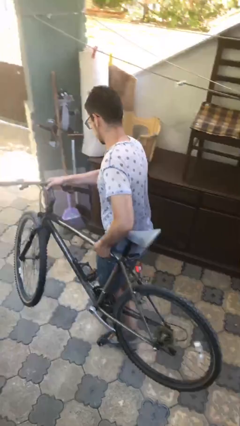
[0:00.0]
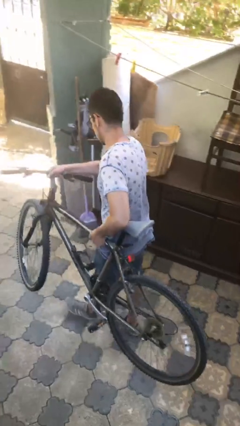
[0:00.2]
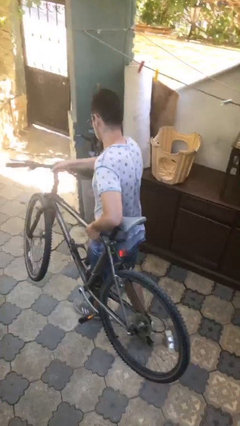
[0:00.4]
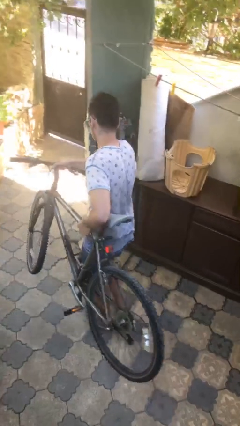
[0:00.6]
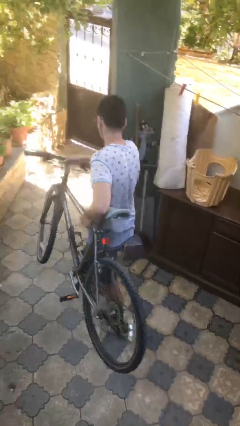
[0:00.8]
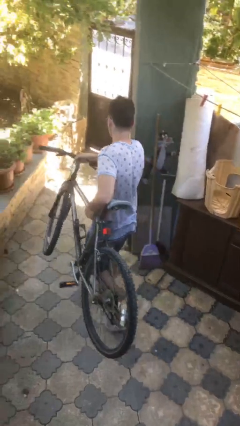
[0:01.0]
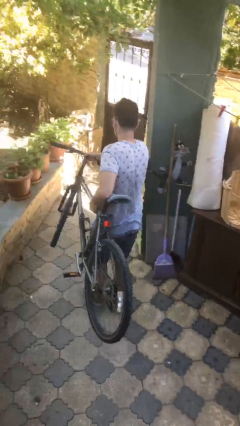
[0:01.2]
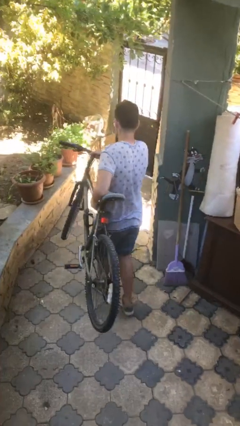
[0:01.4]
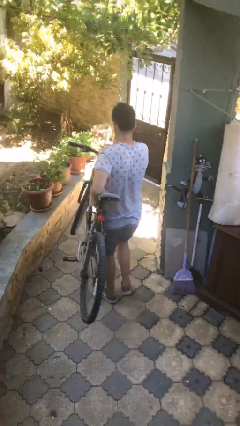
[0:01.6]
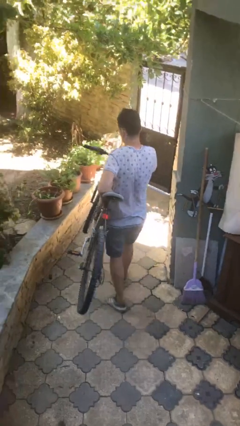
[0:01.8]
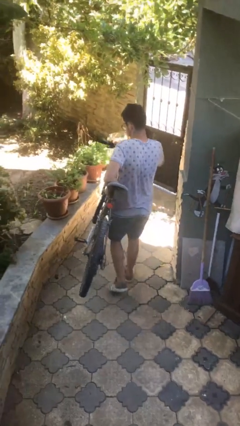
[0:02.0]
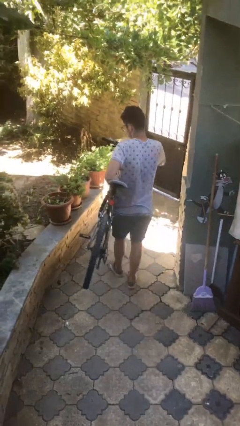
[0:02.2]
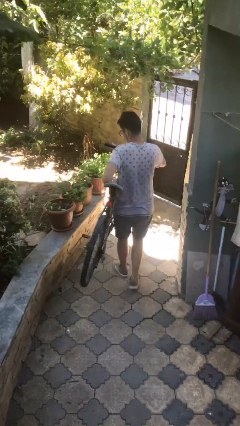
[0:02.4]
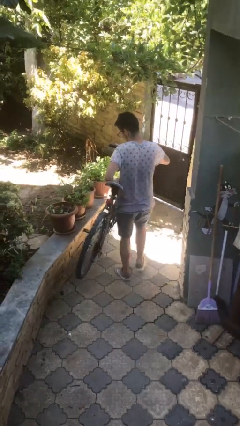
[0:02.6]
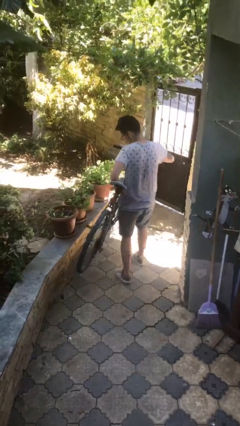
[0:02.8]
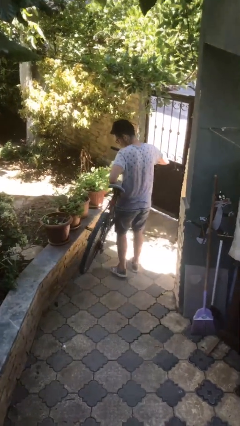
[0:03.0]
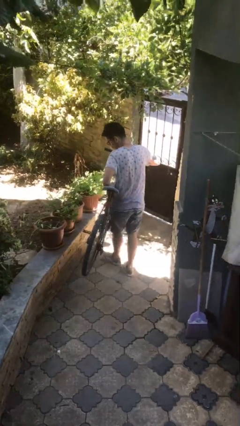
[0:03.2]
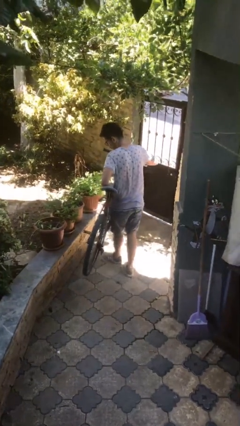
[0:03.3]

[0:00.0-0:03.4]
person carries heavy object

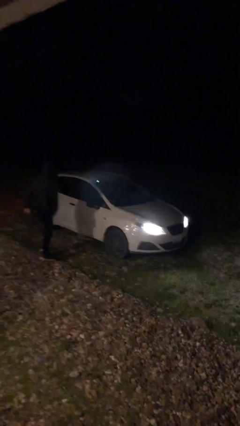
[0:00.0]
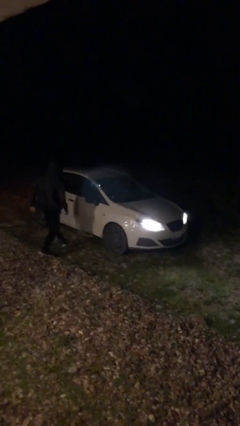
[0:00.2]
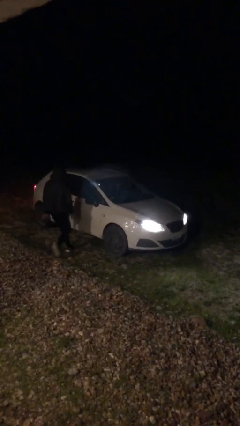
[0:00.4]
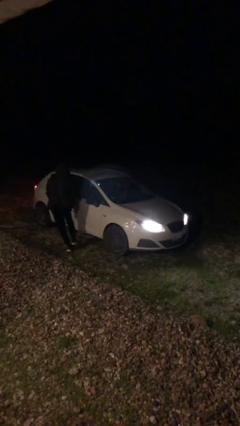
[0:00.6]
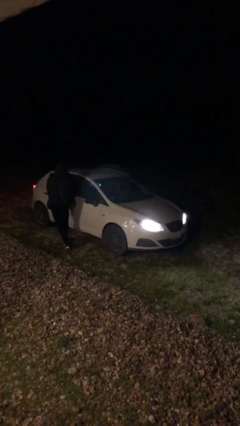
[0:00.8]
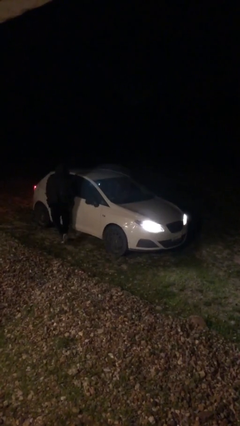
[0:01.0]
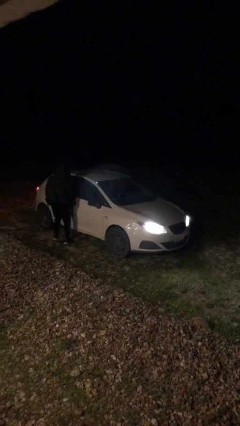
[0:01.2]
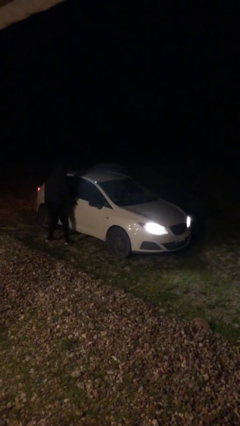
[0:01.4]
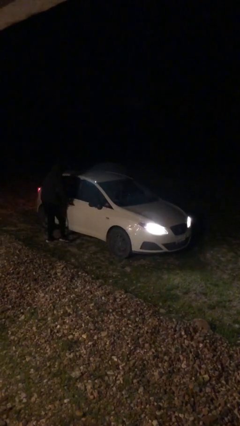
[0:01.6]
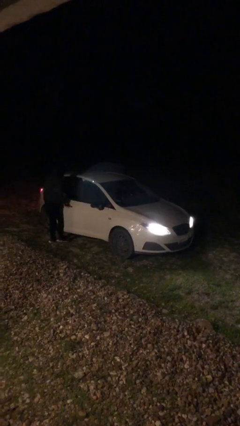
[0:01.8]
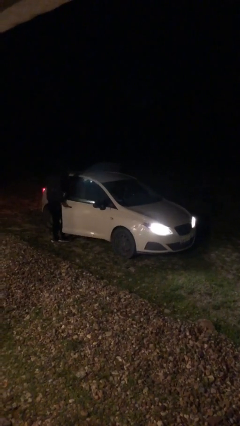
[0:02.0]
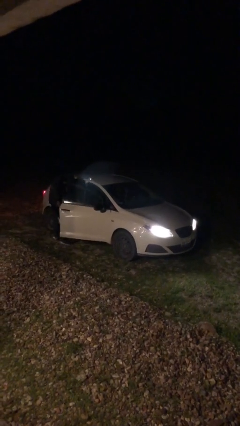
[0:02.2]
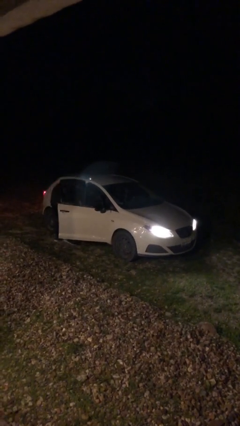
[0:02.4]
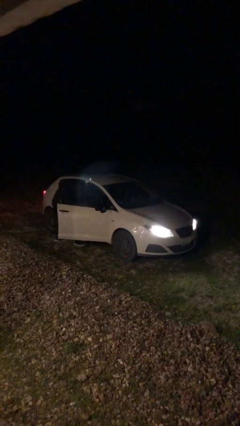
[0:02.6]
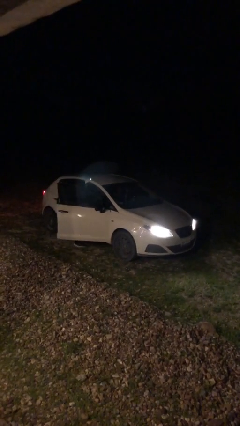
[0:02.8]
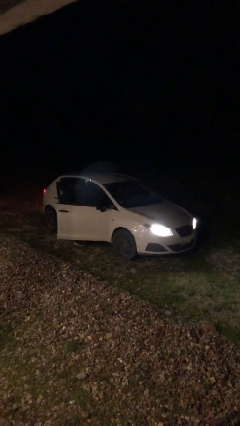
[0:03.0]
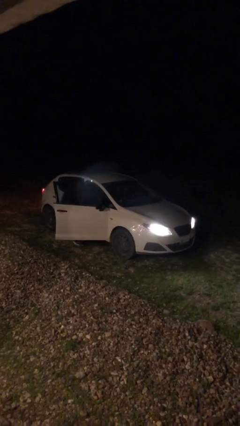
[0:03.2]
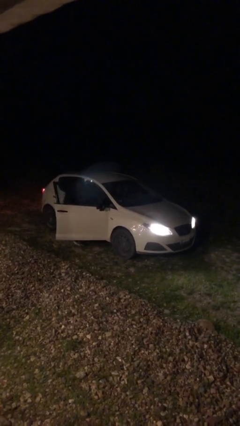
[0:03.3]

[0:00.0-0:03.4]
car picks up person

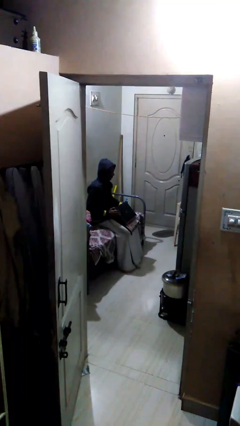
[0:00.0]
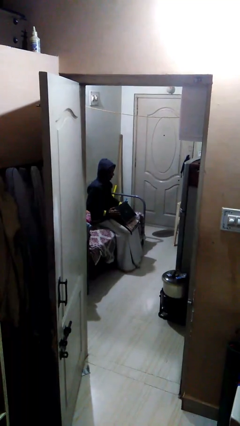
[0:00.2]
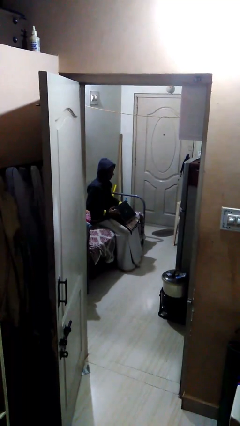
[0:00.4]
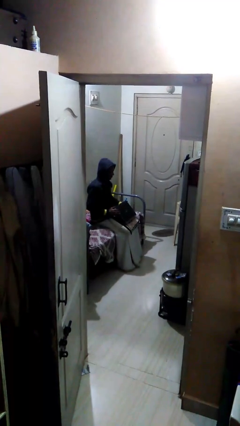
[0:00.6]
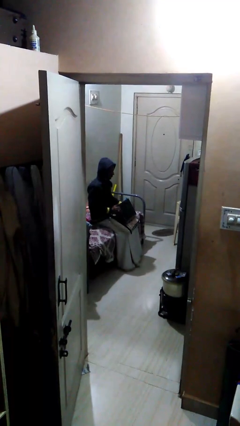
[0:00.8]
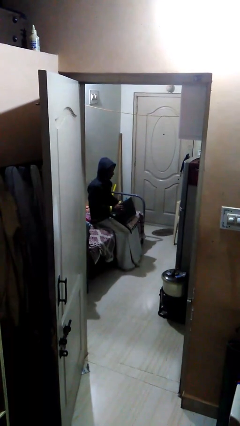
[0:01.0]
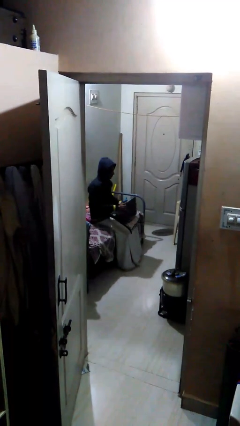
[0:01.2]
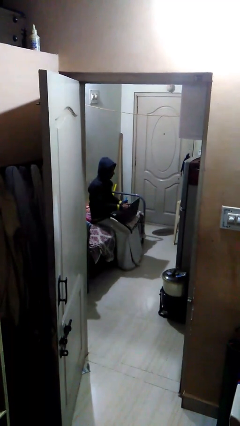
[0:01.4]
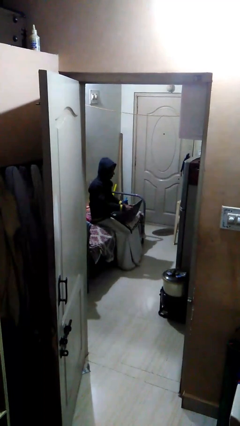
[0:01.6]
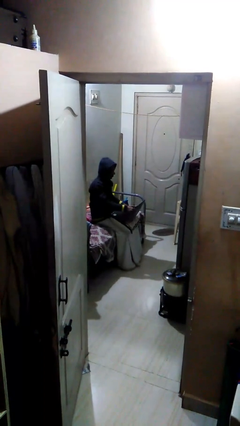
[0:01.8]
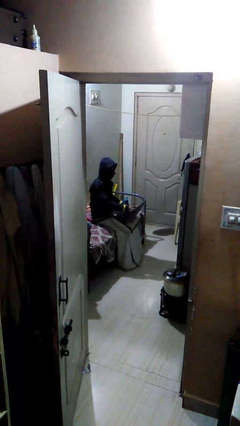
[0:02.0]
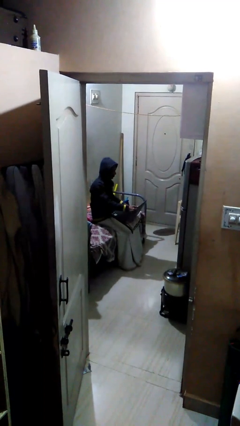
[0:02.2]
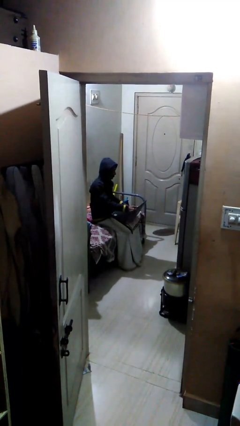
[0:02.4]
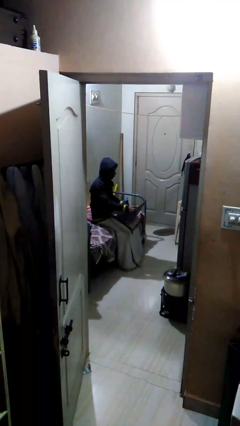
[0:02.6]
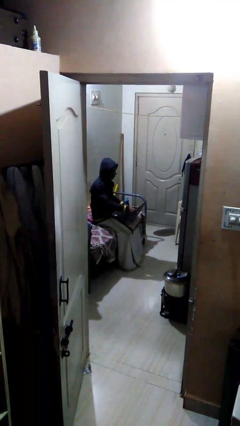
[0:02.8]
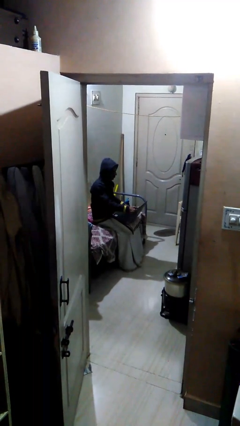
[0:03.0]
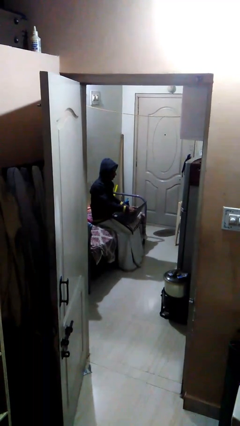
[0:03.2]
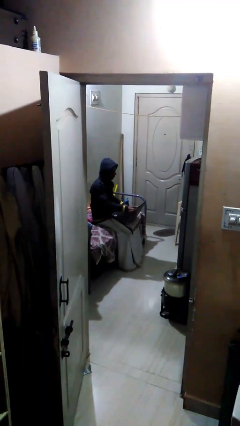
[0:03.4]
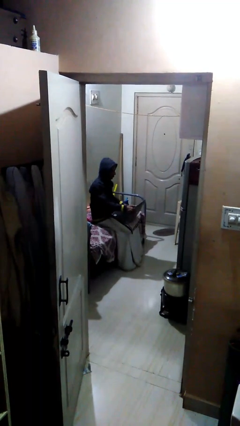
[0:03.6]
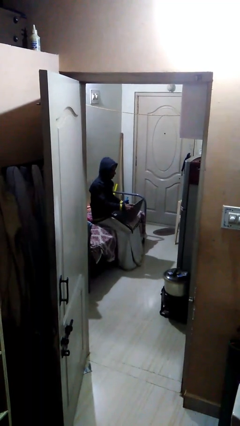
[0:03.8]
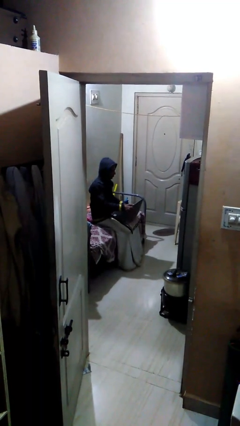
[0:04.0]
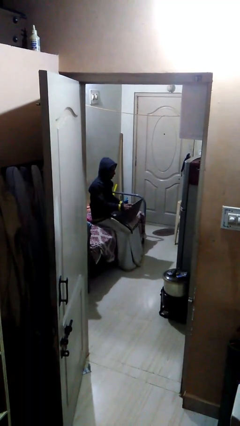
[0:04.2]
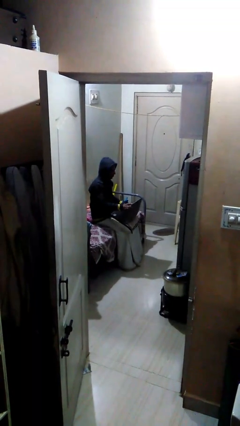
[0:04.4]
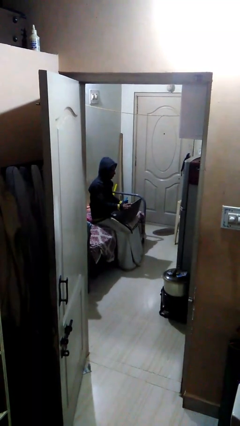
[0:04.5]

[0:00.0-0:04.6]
person interacts with laptop

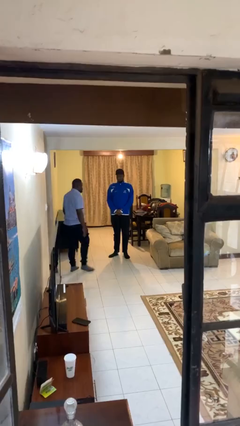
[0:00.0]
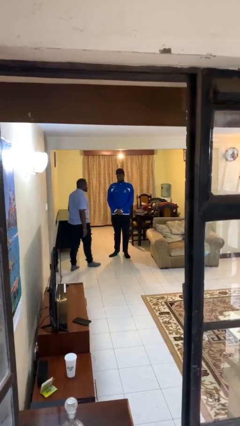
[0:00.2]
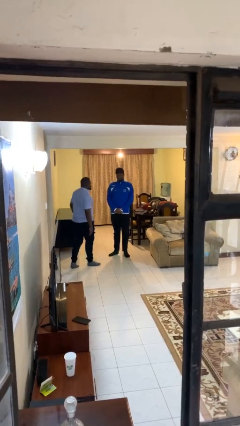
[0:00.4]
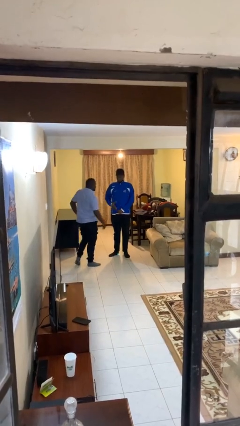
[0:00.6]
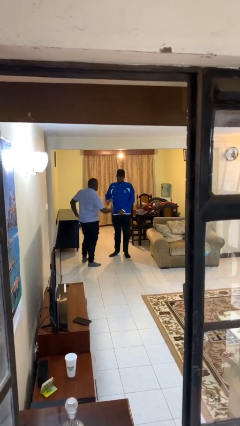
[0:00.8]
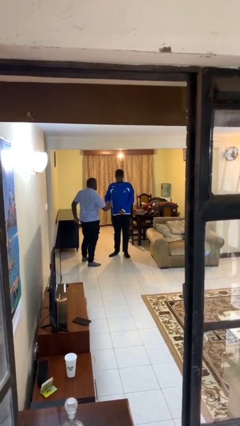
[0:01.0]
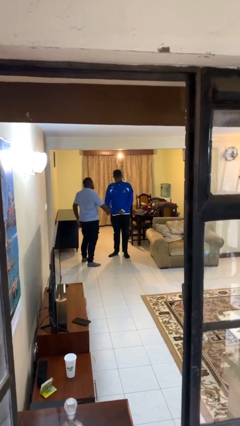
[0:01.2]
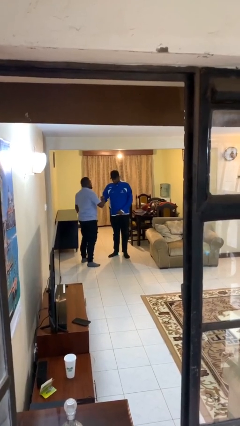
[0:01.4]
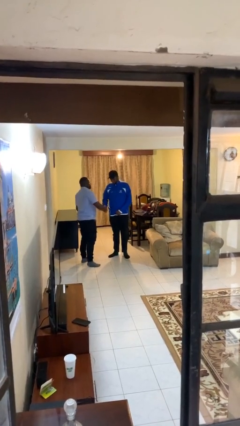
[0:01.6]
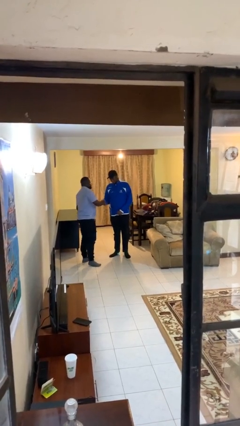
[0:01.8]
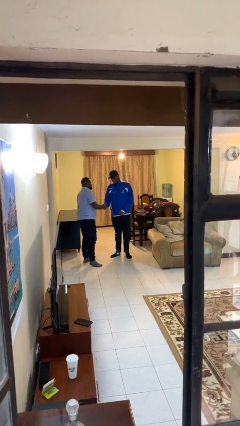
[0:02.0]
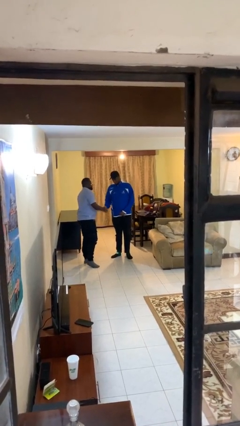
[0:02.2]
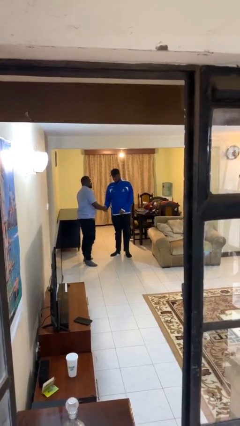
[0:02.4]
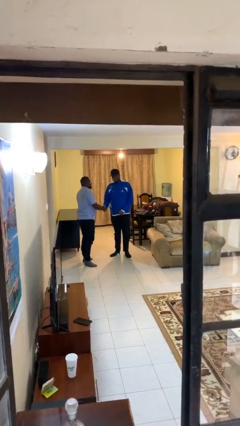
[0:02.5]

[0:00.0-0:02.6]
person shakes hand

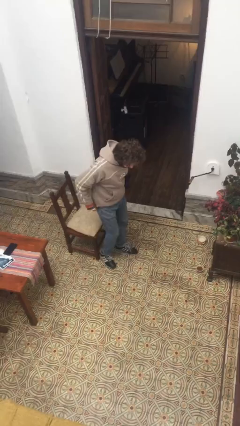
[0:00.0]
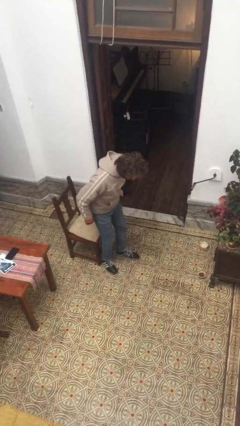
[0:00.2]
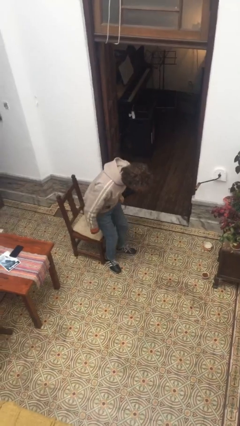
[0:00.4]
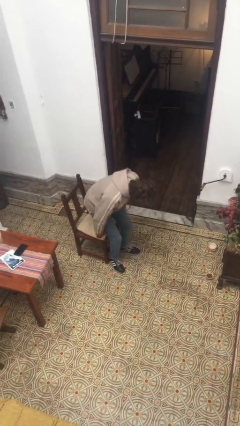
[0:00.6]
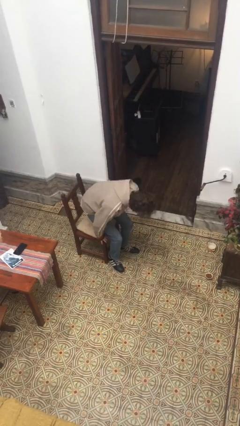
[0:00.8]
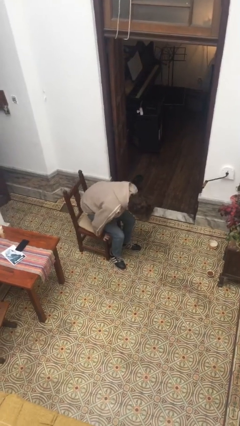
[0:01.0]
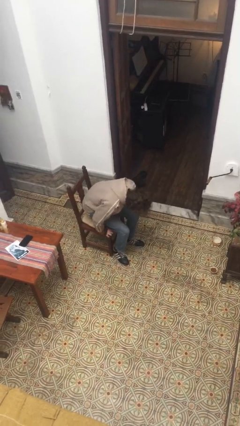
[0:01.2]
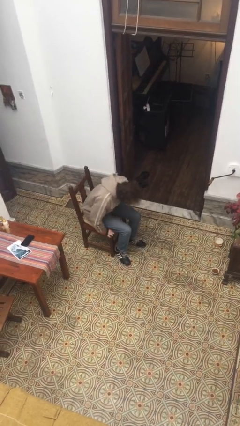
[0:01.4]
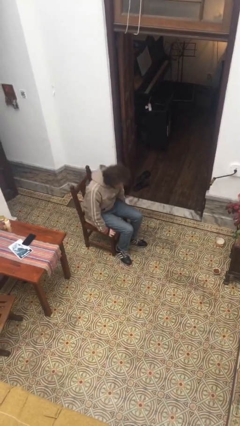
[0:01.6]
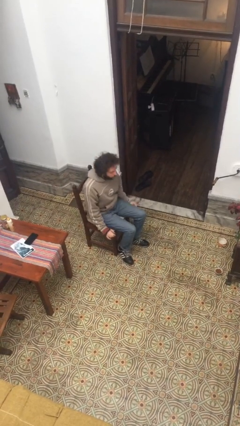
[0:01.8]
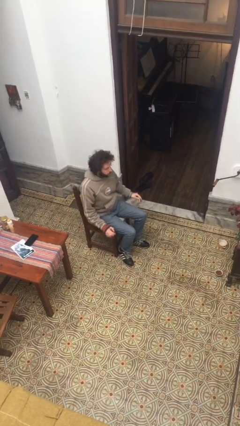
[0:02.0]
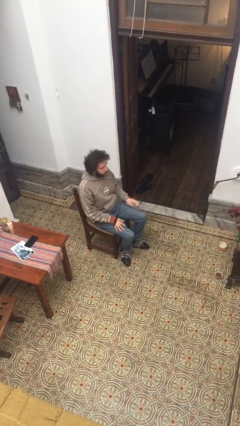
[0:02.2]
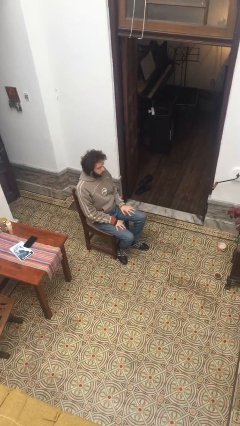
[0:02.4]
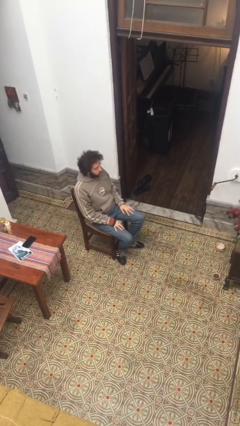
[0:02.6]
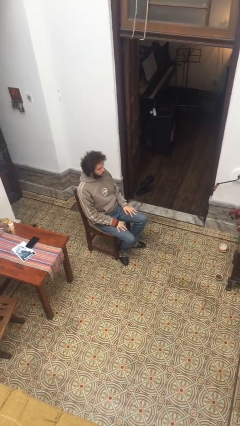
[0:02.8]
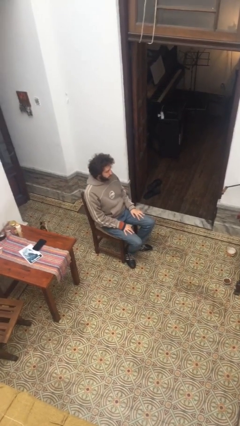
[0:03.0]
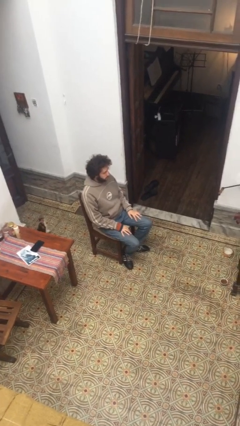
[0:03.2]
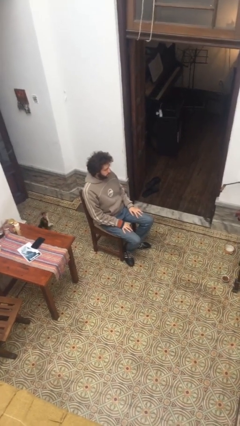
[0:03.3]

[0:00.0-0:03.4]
person sits down

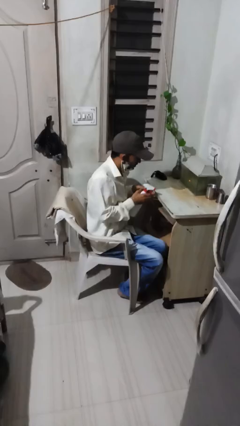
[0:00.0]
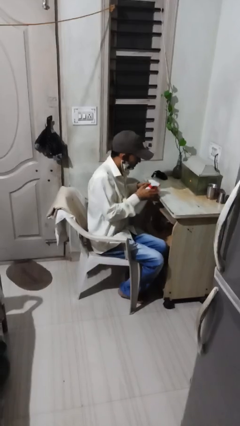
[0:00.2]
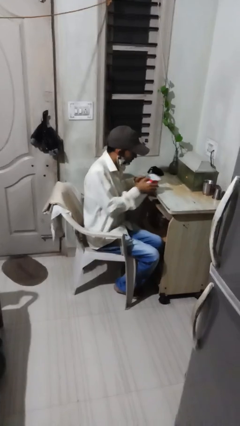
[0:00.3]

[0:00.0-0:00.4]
person sprays from bottle
